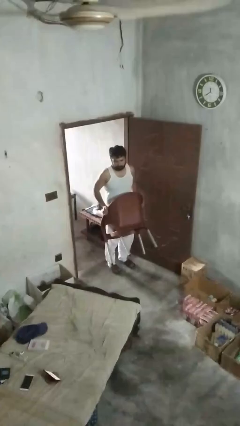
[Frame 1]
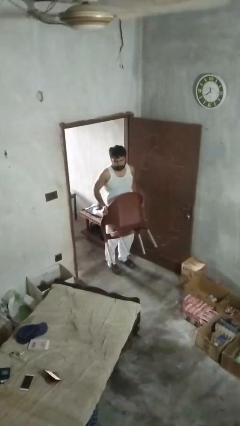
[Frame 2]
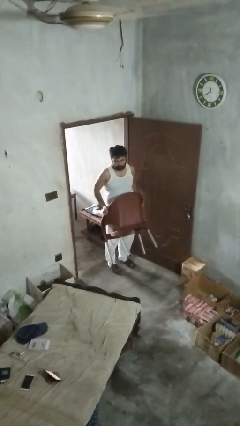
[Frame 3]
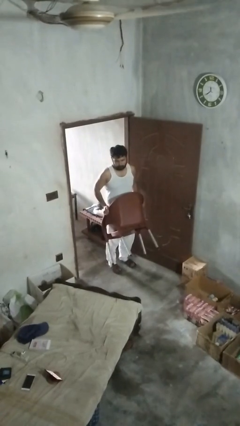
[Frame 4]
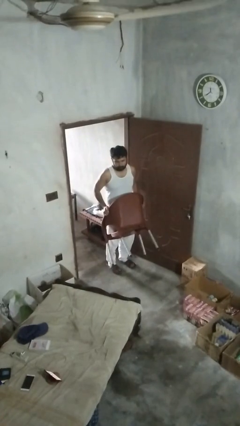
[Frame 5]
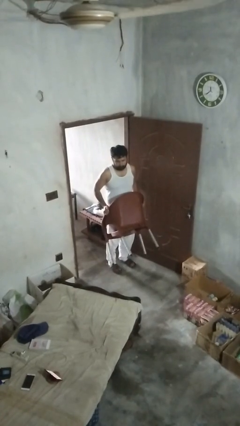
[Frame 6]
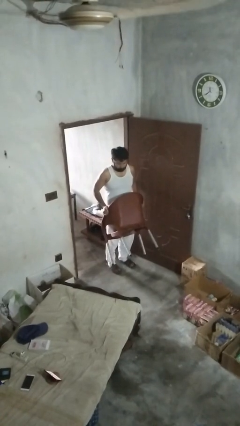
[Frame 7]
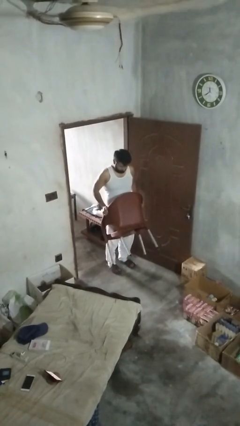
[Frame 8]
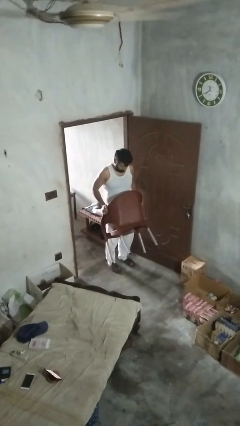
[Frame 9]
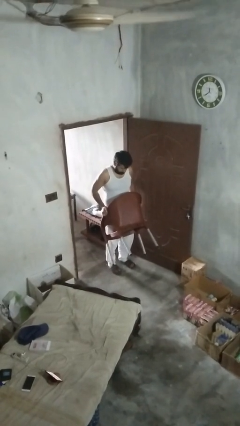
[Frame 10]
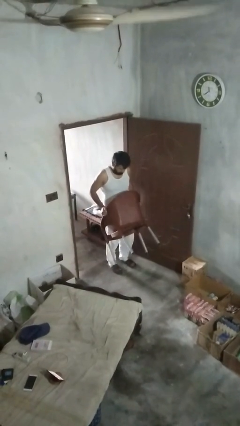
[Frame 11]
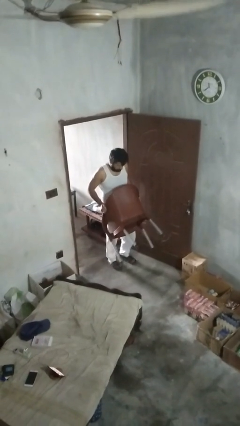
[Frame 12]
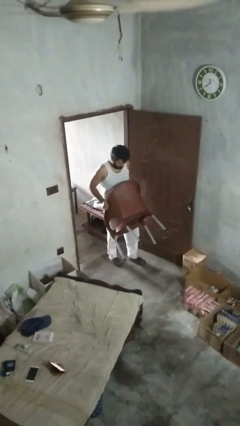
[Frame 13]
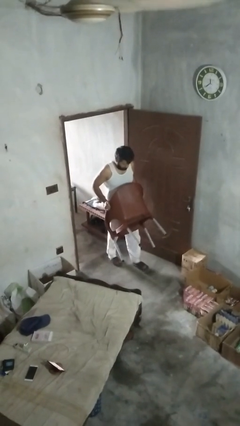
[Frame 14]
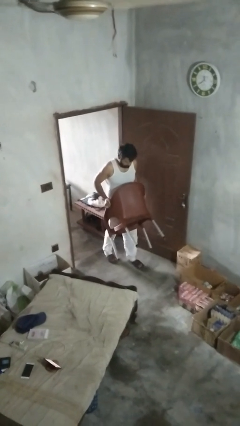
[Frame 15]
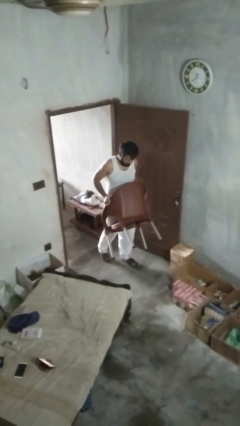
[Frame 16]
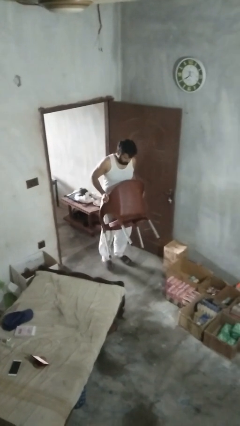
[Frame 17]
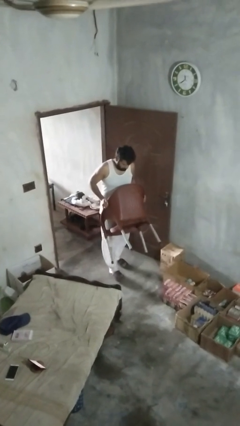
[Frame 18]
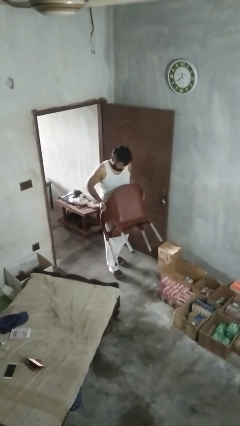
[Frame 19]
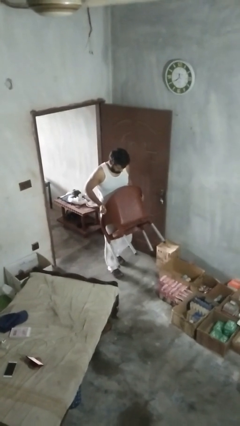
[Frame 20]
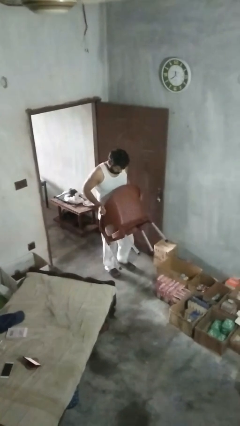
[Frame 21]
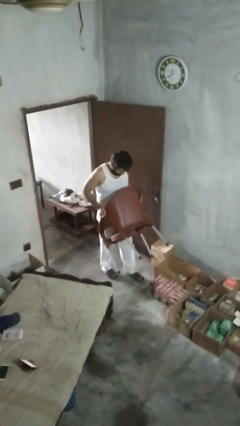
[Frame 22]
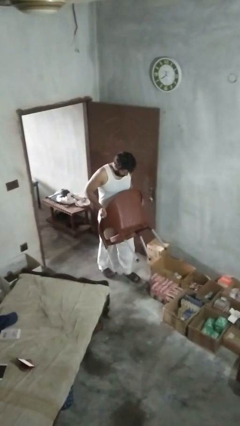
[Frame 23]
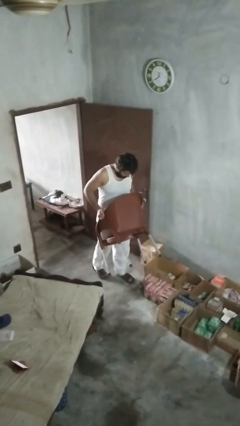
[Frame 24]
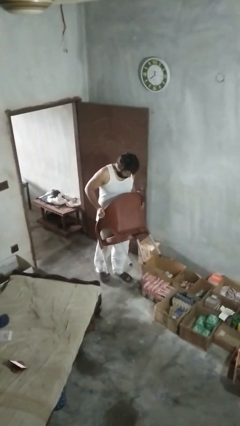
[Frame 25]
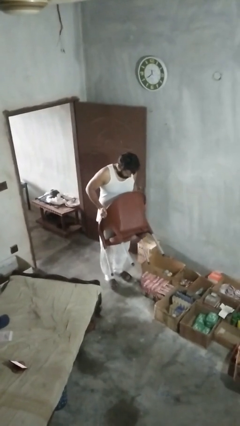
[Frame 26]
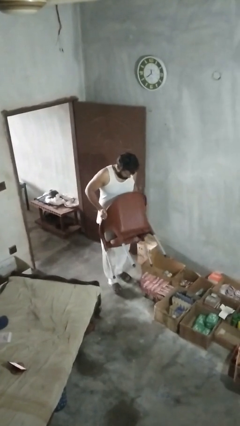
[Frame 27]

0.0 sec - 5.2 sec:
person carries furniture

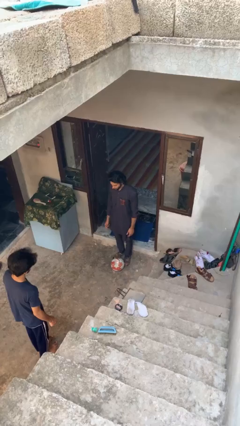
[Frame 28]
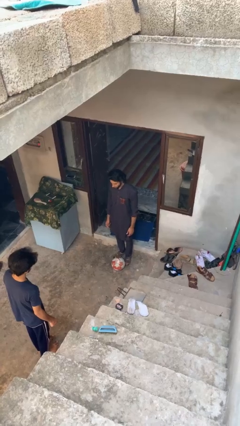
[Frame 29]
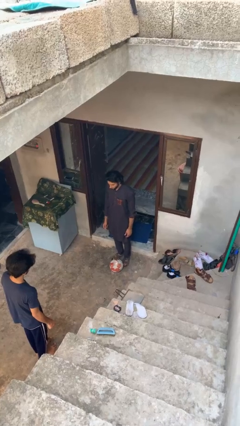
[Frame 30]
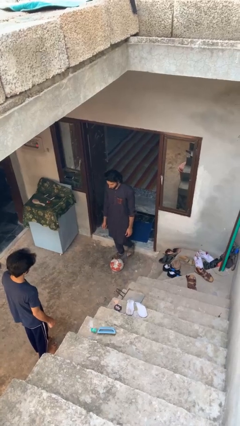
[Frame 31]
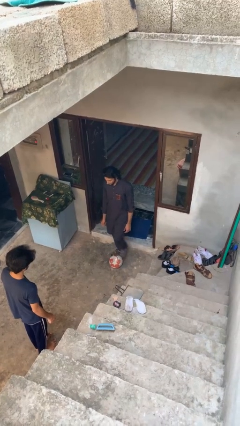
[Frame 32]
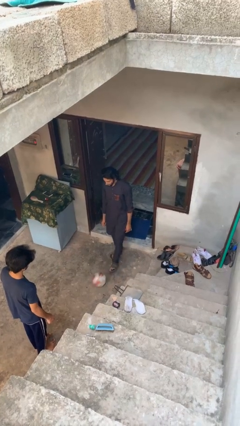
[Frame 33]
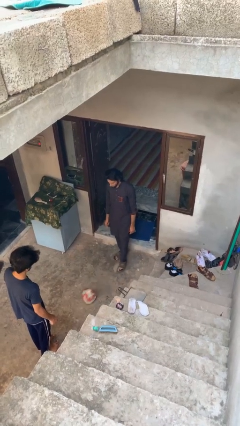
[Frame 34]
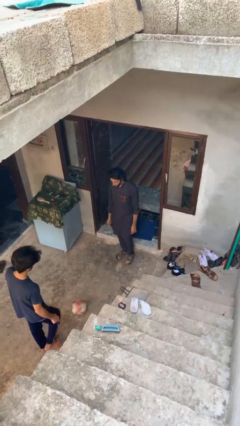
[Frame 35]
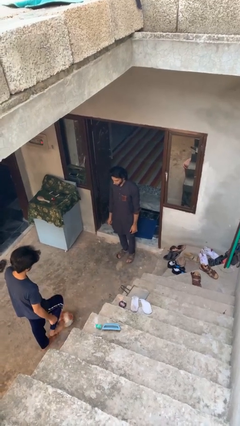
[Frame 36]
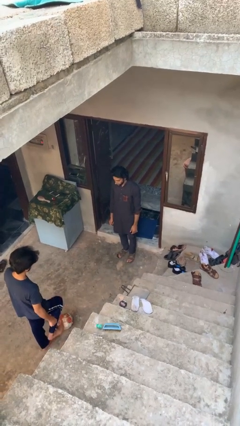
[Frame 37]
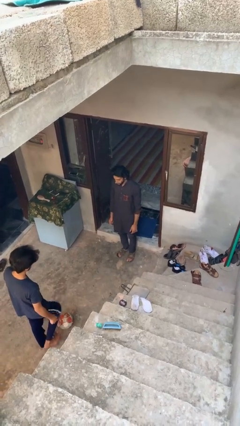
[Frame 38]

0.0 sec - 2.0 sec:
person kicks object to person

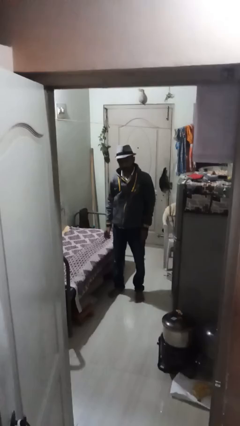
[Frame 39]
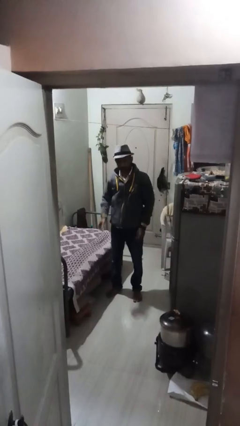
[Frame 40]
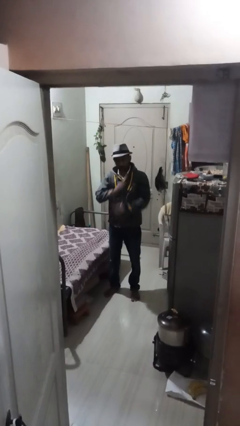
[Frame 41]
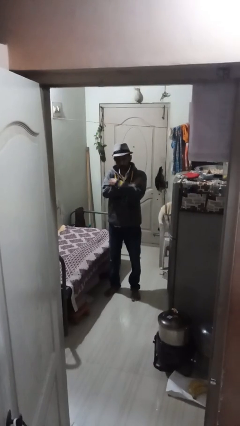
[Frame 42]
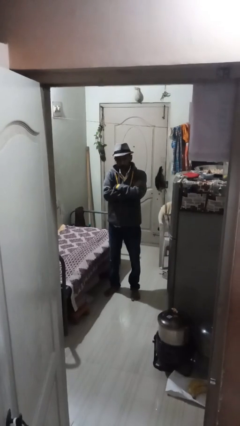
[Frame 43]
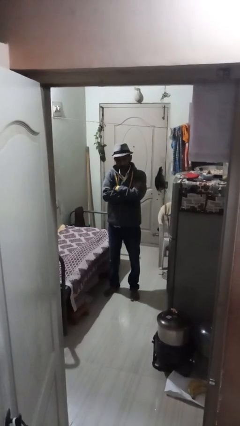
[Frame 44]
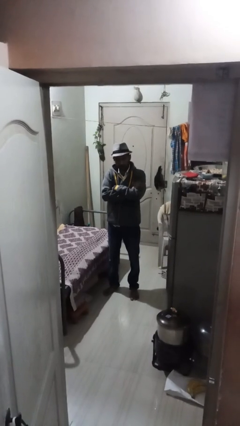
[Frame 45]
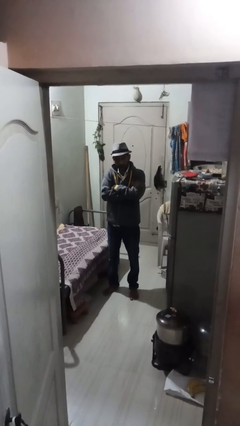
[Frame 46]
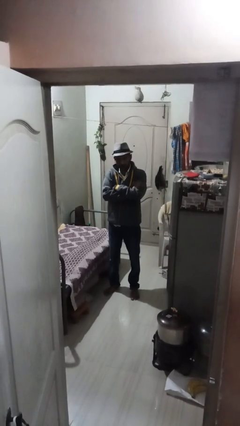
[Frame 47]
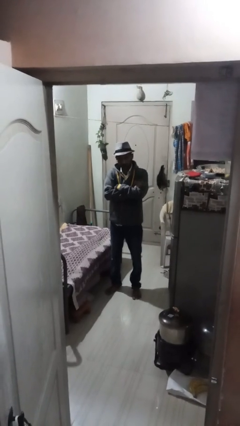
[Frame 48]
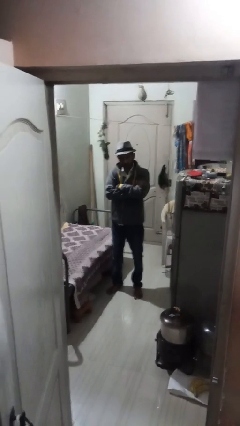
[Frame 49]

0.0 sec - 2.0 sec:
person crosses arms

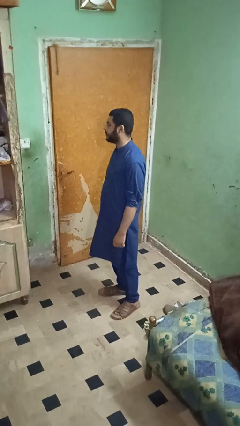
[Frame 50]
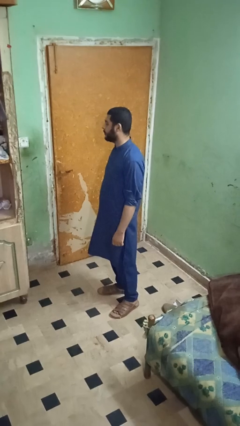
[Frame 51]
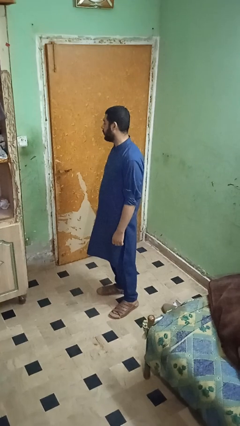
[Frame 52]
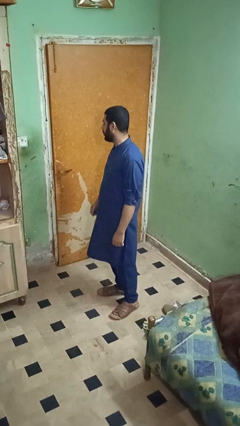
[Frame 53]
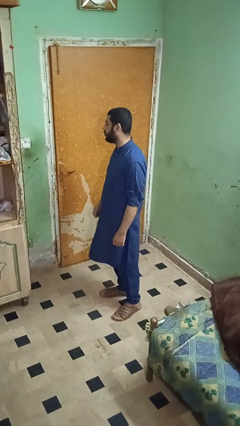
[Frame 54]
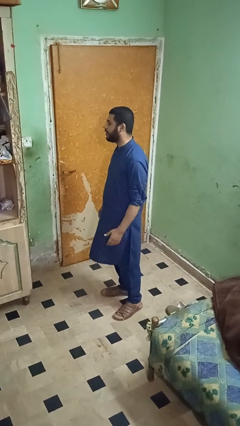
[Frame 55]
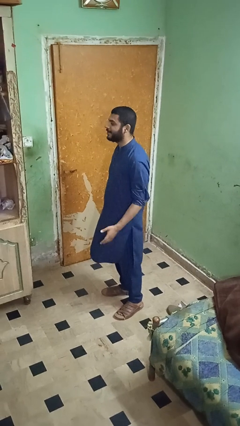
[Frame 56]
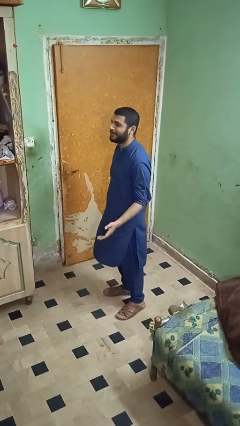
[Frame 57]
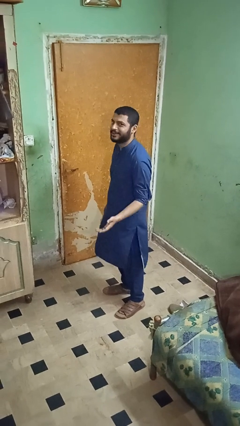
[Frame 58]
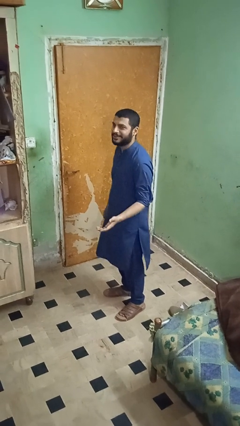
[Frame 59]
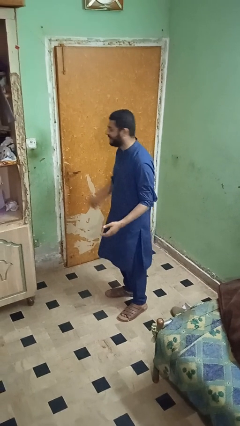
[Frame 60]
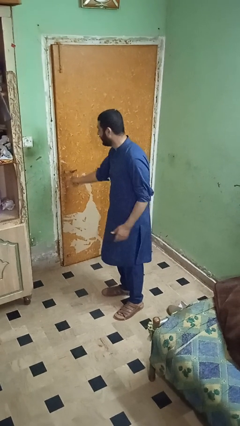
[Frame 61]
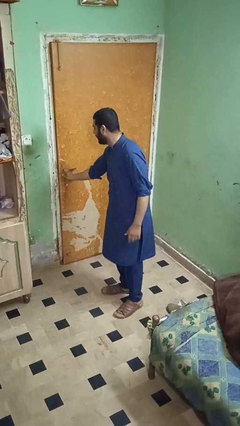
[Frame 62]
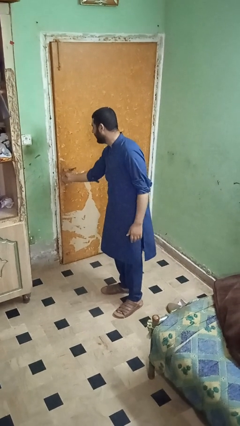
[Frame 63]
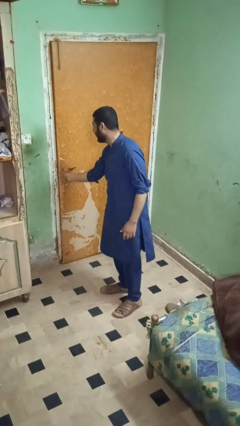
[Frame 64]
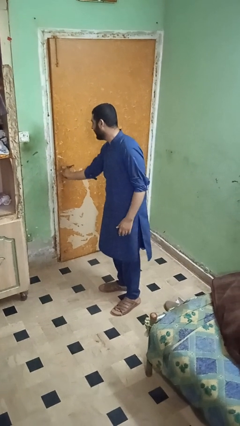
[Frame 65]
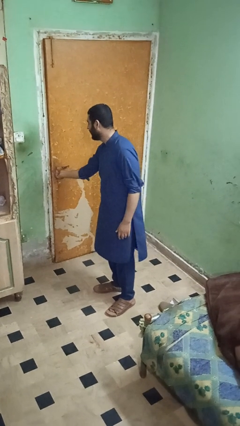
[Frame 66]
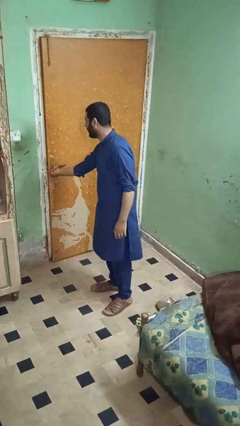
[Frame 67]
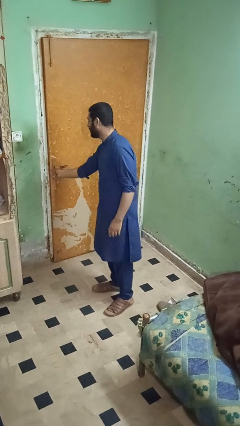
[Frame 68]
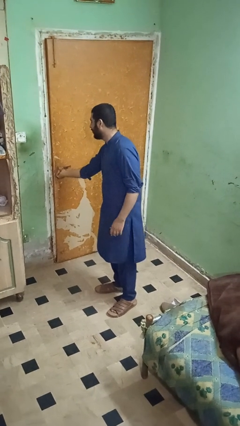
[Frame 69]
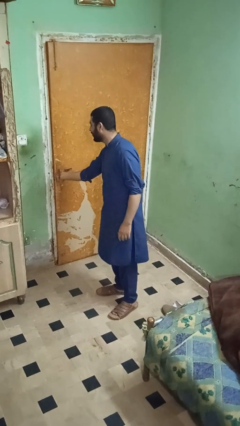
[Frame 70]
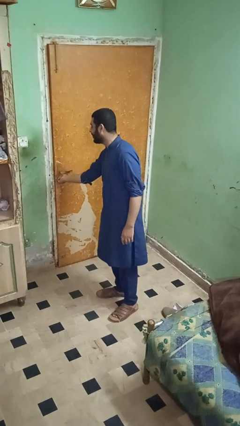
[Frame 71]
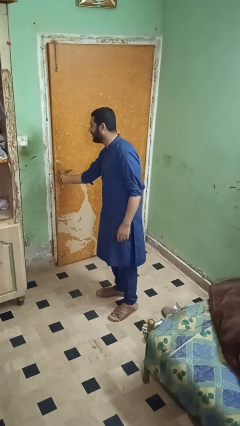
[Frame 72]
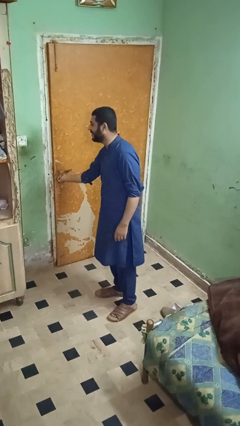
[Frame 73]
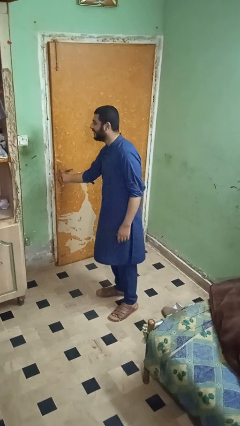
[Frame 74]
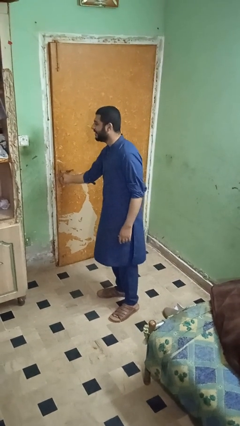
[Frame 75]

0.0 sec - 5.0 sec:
person unlocks door with keys

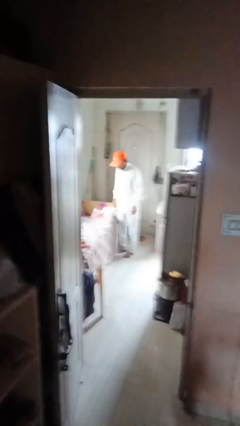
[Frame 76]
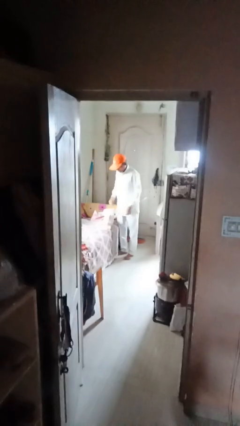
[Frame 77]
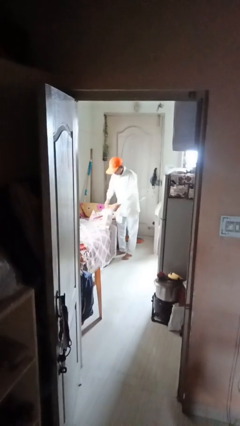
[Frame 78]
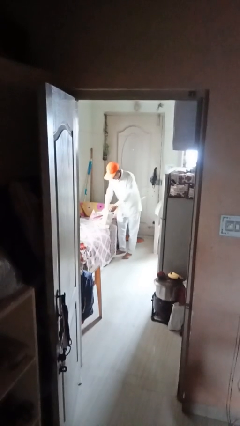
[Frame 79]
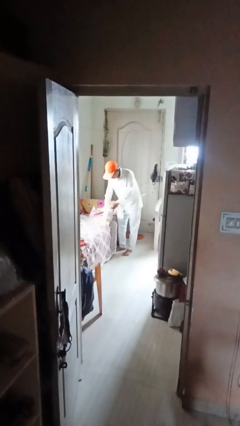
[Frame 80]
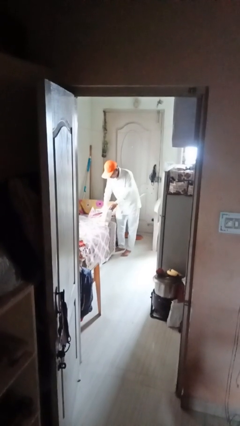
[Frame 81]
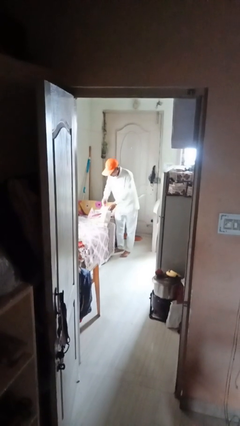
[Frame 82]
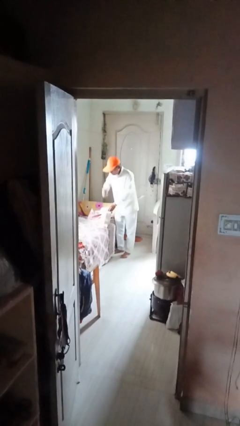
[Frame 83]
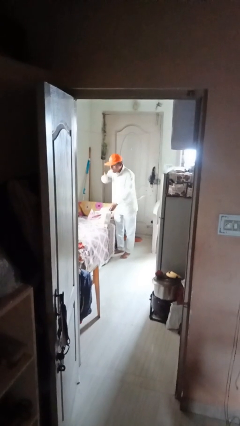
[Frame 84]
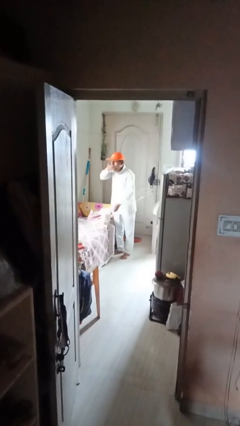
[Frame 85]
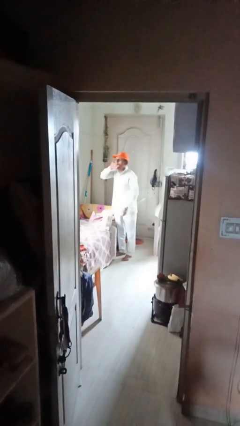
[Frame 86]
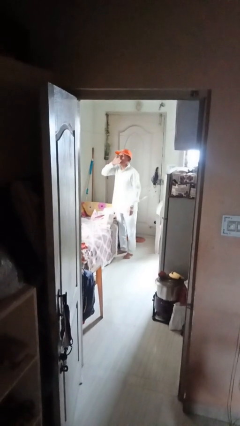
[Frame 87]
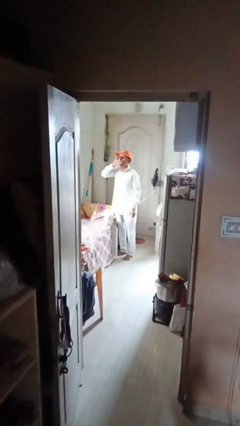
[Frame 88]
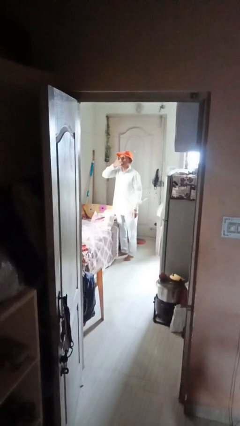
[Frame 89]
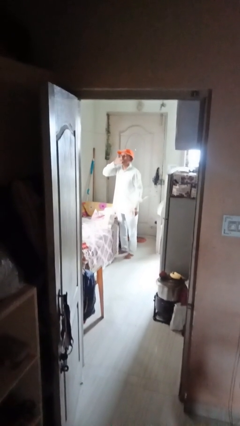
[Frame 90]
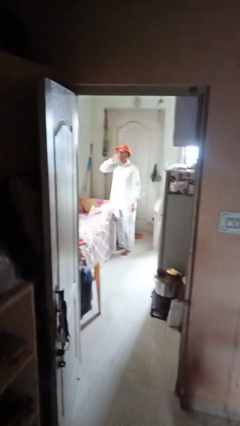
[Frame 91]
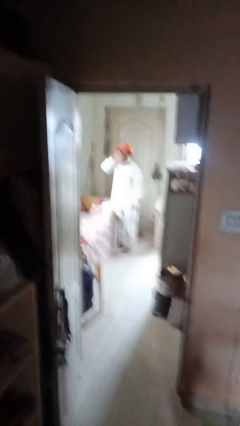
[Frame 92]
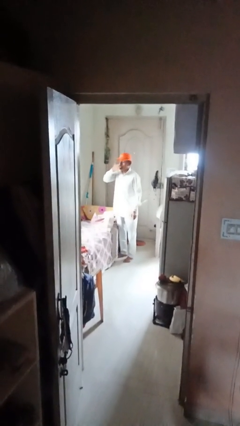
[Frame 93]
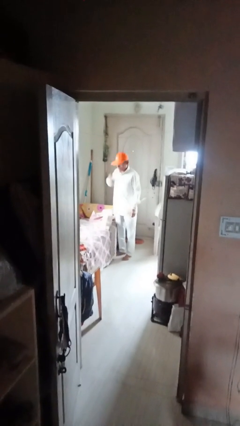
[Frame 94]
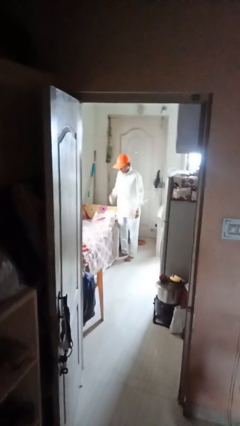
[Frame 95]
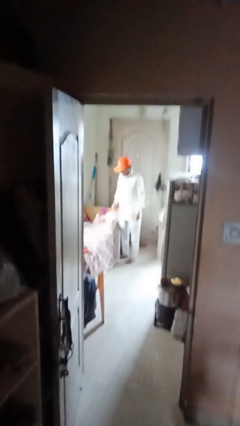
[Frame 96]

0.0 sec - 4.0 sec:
person eats snack from bag
